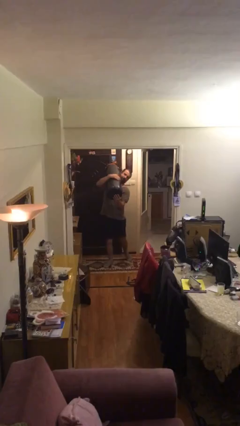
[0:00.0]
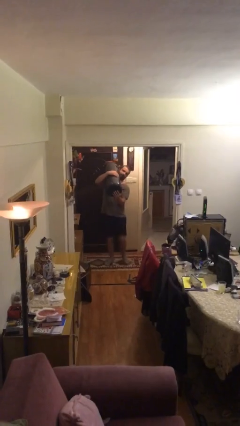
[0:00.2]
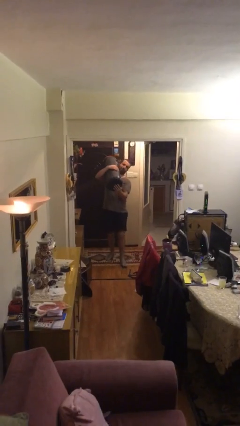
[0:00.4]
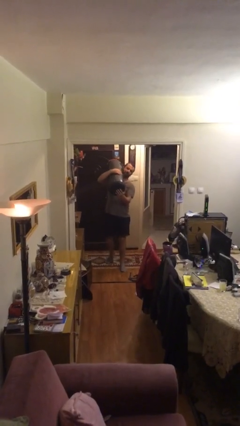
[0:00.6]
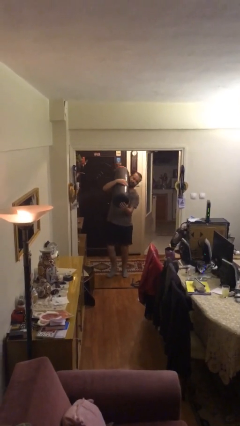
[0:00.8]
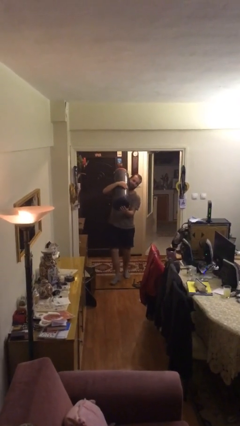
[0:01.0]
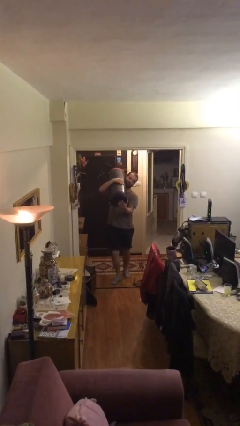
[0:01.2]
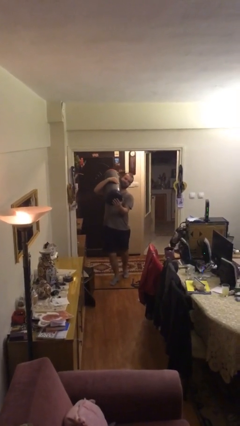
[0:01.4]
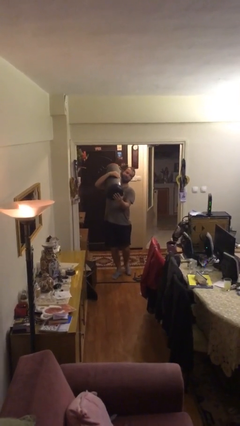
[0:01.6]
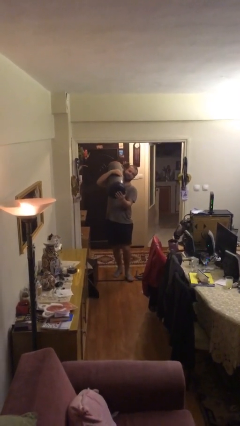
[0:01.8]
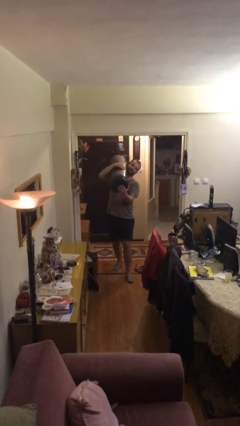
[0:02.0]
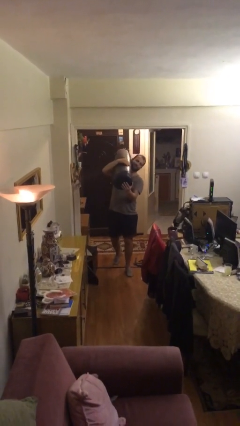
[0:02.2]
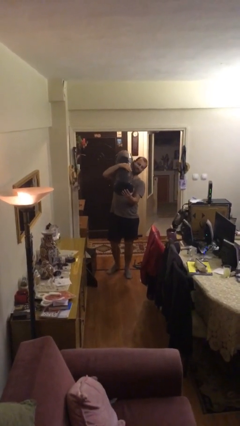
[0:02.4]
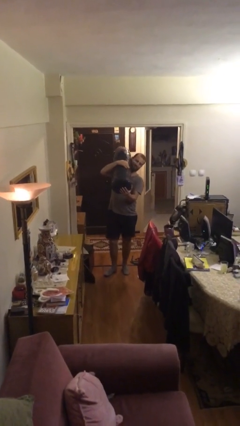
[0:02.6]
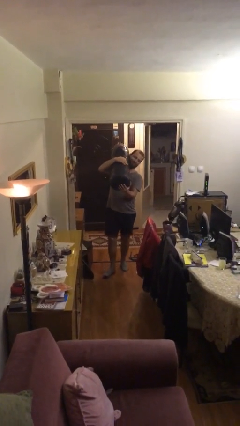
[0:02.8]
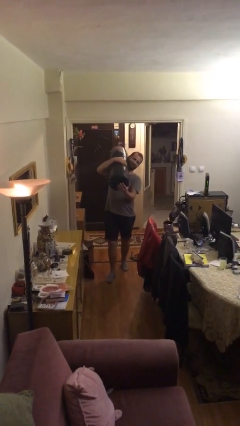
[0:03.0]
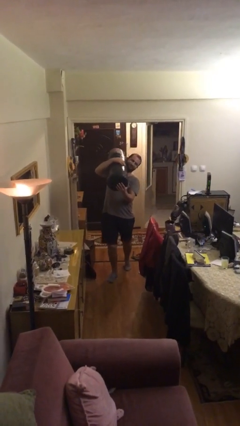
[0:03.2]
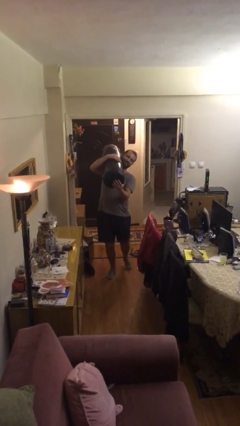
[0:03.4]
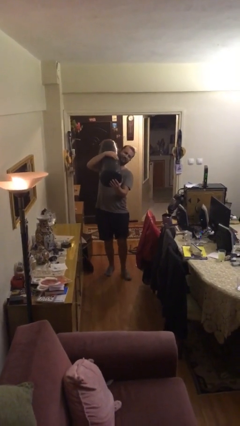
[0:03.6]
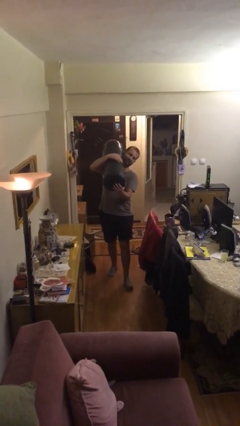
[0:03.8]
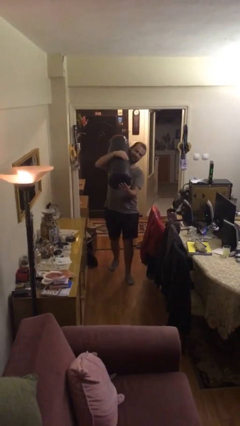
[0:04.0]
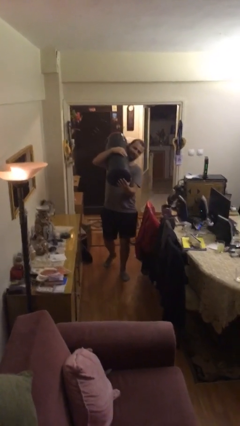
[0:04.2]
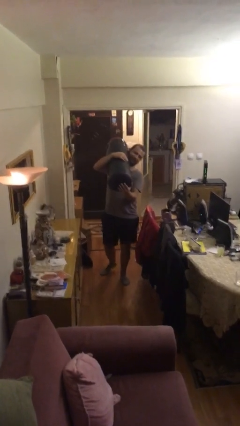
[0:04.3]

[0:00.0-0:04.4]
person carries heavy object

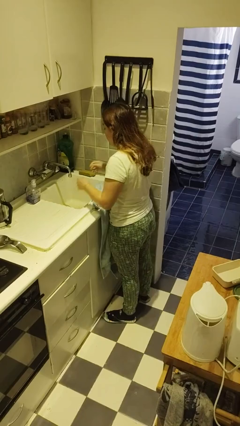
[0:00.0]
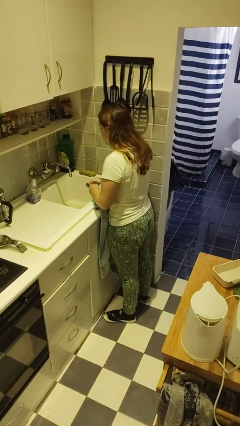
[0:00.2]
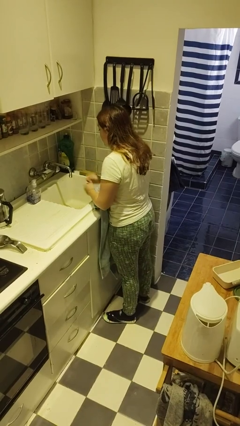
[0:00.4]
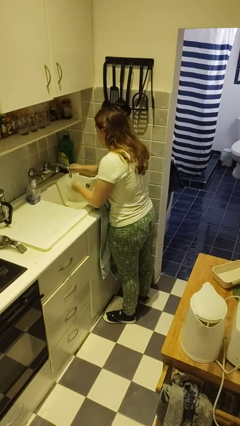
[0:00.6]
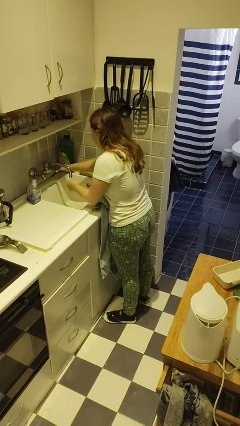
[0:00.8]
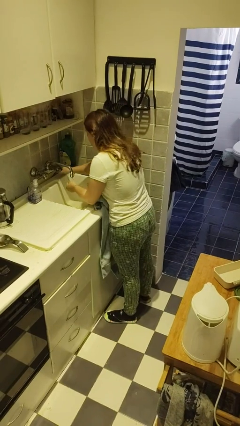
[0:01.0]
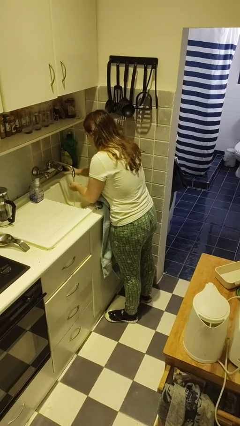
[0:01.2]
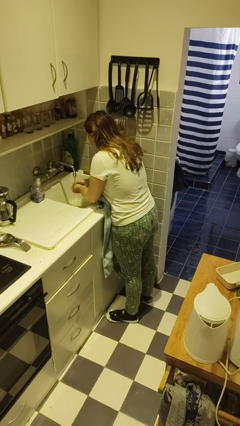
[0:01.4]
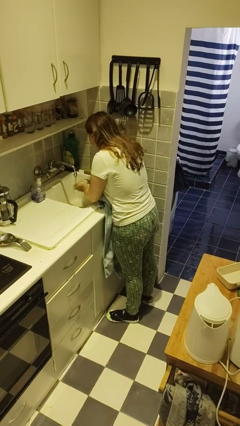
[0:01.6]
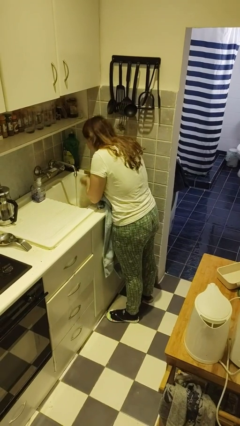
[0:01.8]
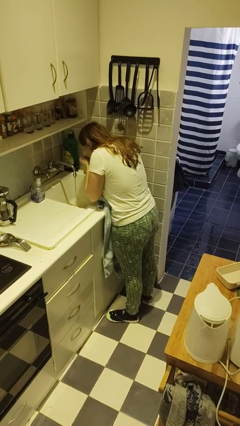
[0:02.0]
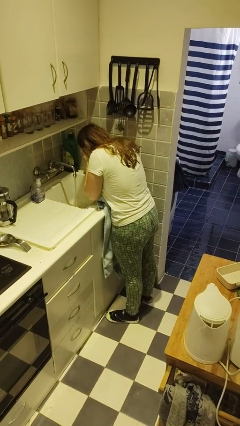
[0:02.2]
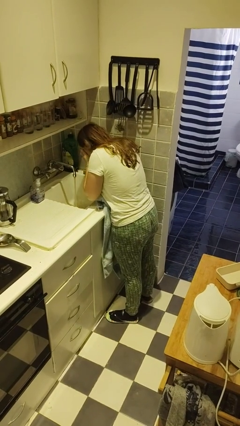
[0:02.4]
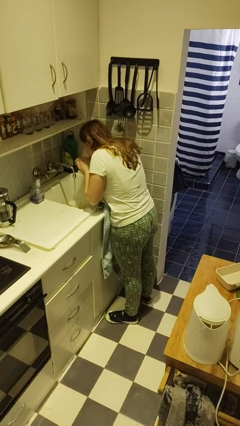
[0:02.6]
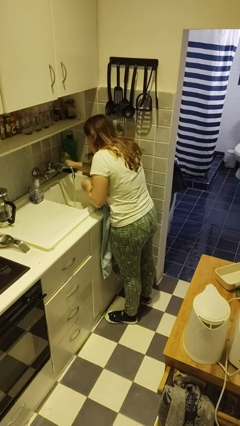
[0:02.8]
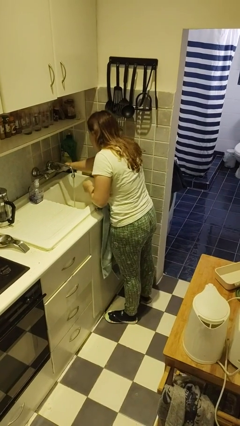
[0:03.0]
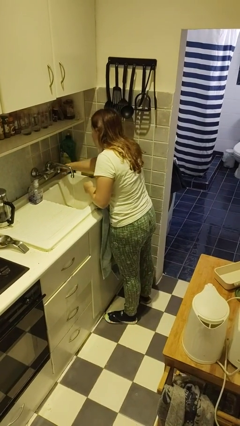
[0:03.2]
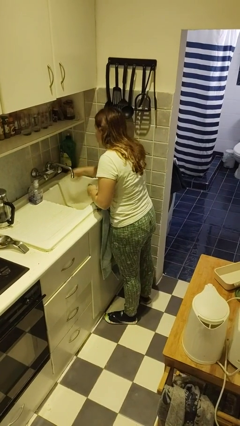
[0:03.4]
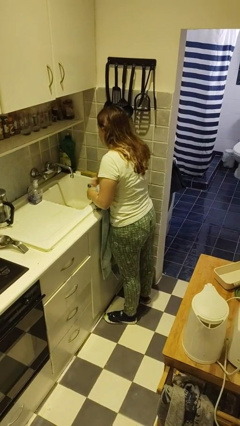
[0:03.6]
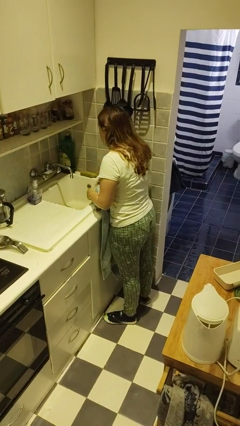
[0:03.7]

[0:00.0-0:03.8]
person washes face

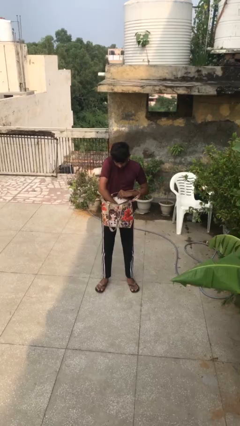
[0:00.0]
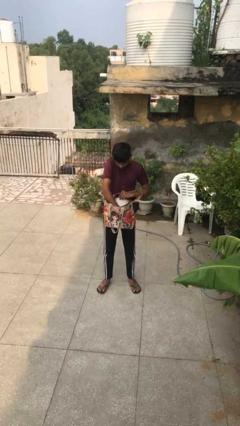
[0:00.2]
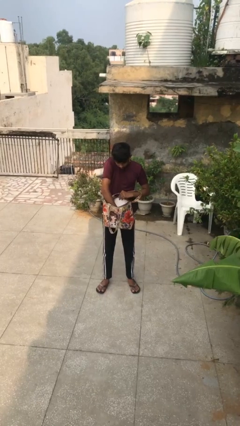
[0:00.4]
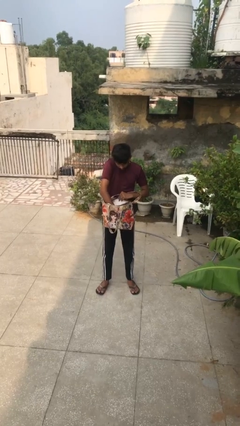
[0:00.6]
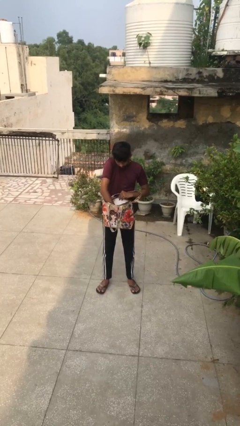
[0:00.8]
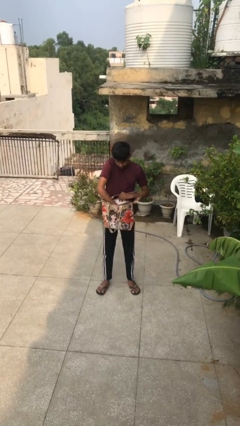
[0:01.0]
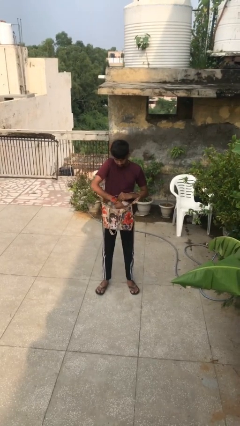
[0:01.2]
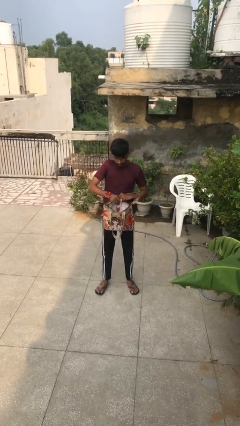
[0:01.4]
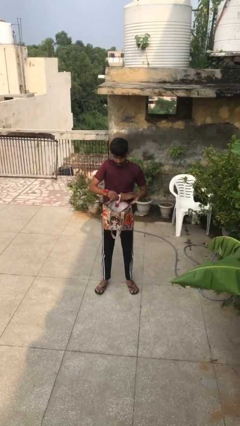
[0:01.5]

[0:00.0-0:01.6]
person searches in purse

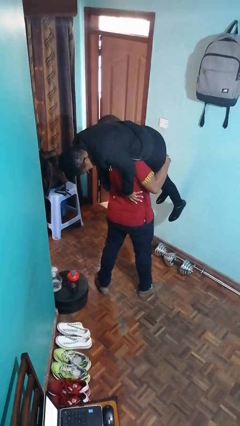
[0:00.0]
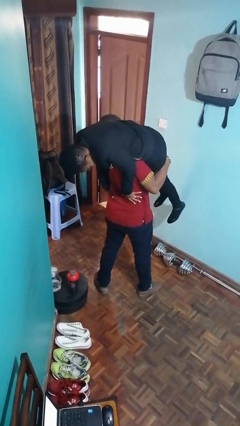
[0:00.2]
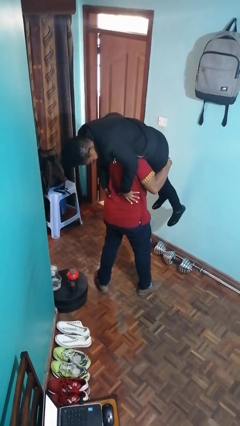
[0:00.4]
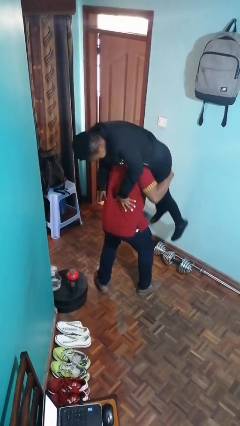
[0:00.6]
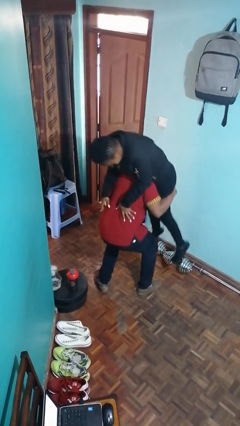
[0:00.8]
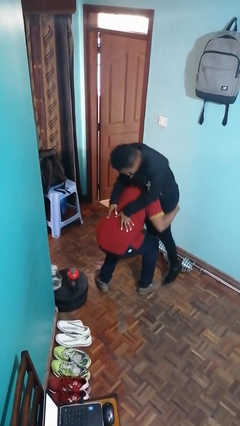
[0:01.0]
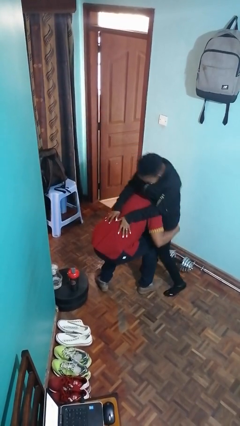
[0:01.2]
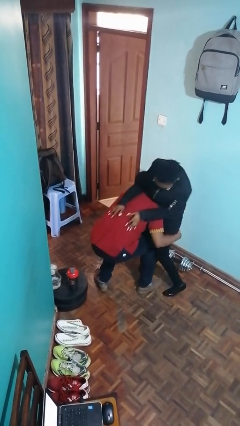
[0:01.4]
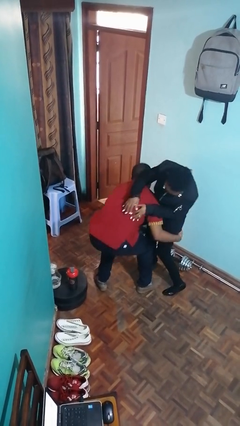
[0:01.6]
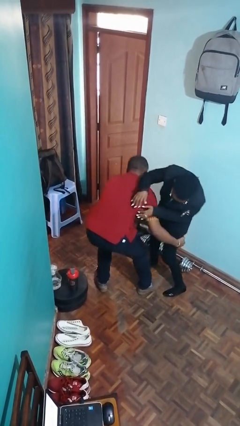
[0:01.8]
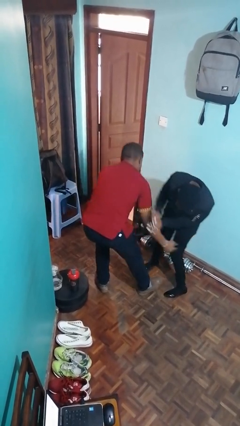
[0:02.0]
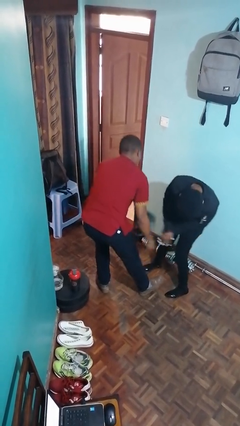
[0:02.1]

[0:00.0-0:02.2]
person puts down person

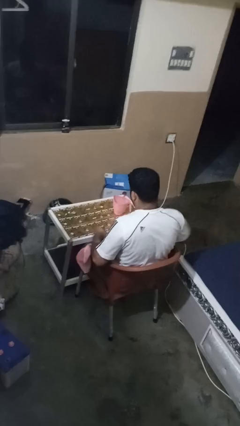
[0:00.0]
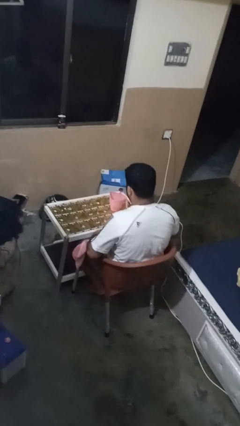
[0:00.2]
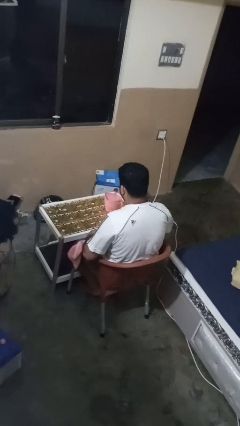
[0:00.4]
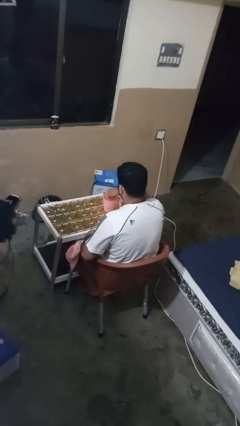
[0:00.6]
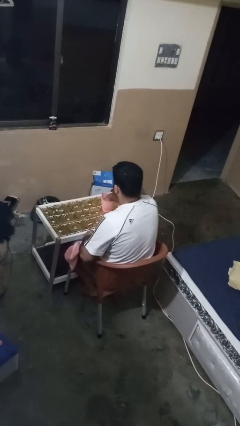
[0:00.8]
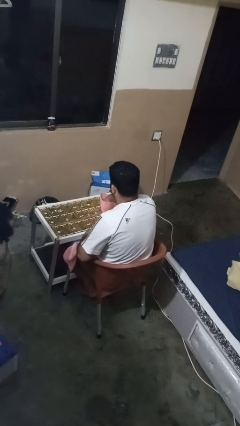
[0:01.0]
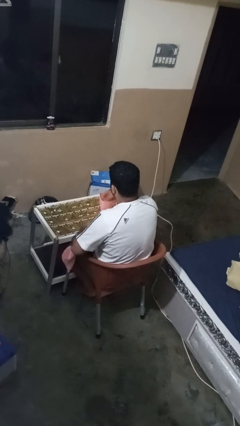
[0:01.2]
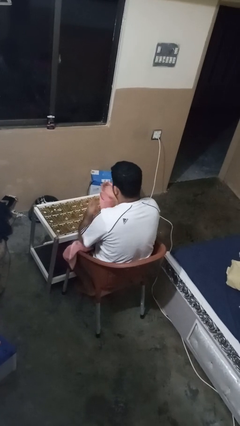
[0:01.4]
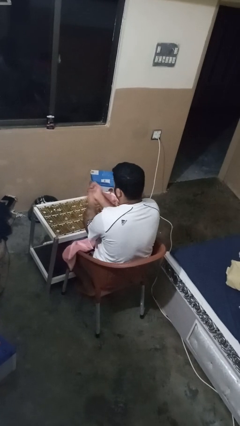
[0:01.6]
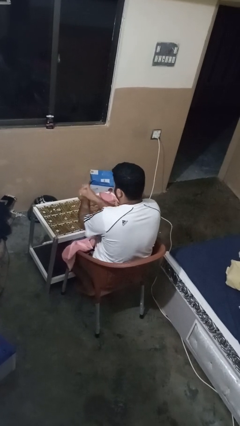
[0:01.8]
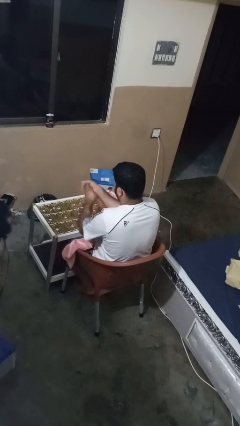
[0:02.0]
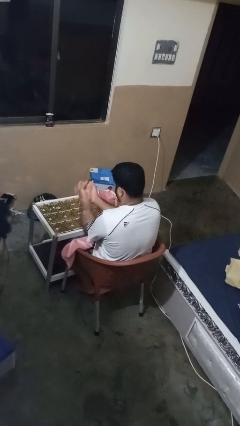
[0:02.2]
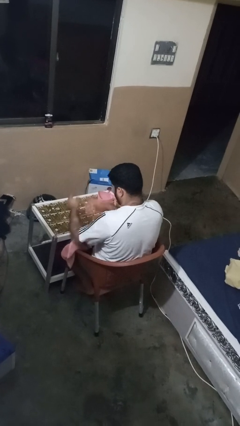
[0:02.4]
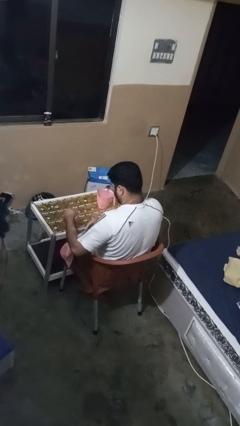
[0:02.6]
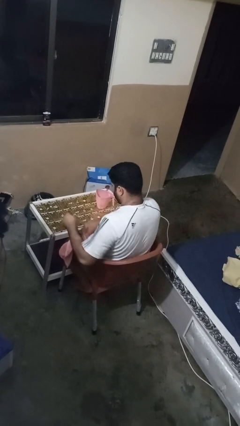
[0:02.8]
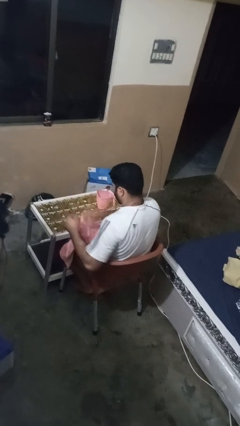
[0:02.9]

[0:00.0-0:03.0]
person washes hands

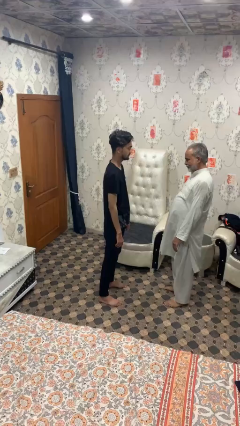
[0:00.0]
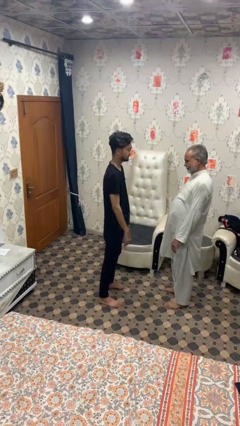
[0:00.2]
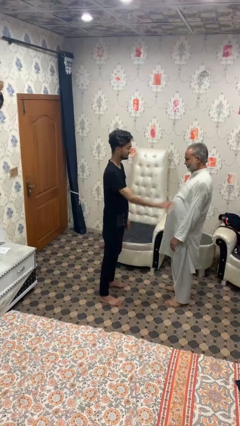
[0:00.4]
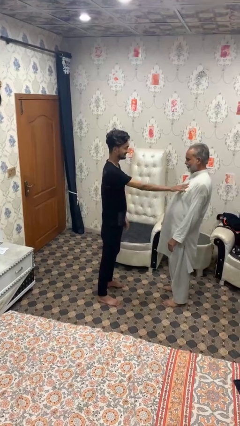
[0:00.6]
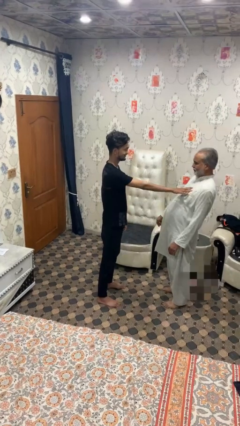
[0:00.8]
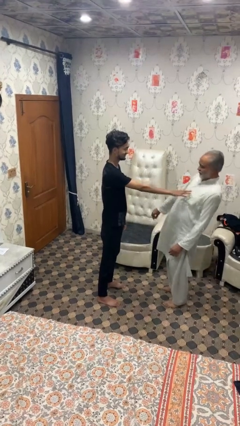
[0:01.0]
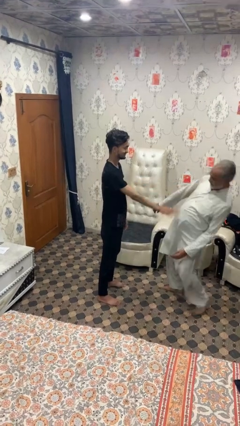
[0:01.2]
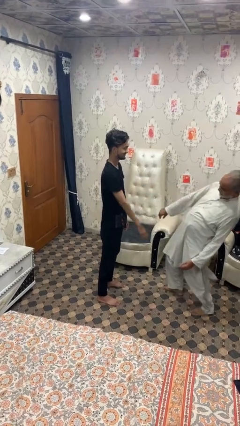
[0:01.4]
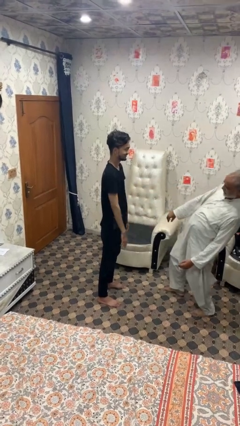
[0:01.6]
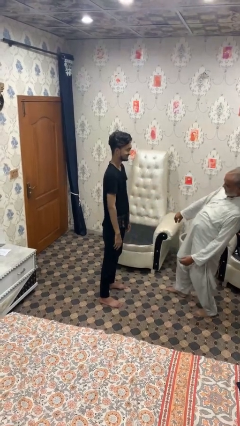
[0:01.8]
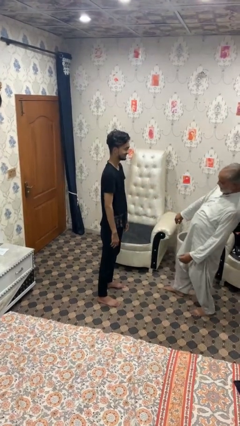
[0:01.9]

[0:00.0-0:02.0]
person shoves person
